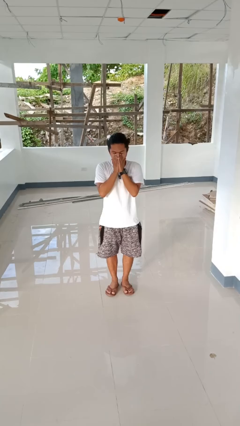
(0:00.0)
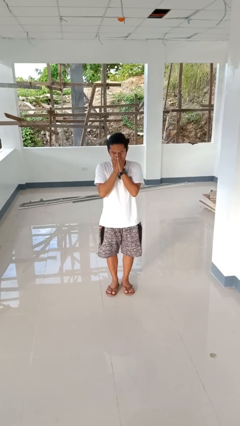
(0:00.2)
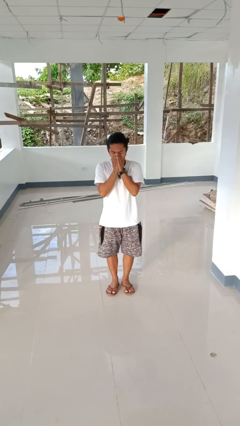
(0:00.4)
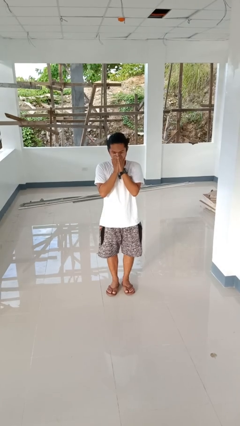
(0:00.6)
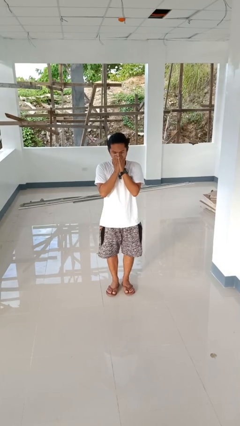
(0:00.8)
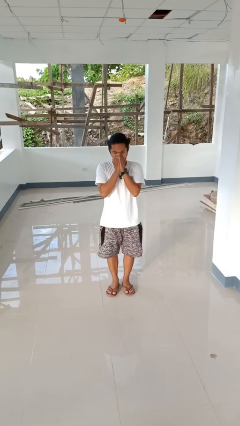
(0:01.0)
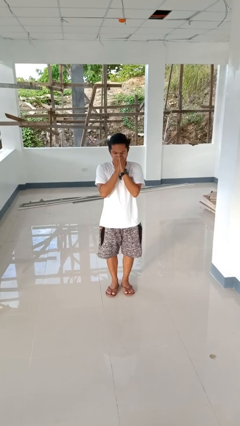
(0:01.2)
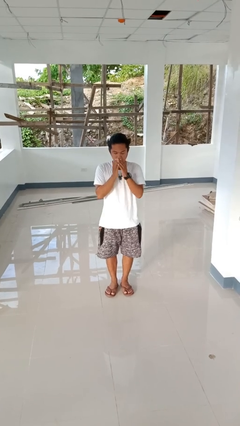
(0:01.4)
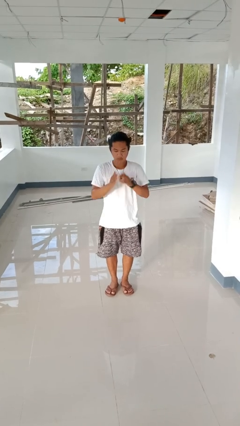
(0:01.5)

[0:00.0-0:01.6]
person sneezes into hand

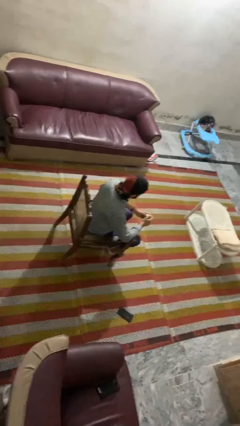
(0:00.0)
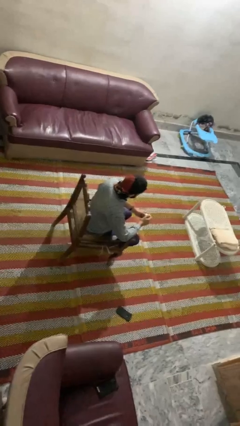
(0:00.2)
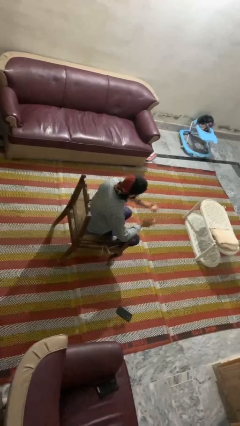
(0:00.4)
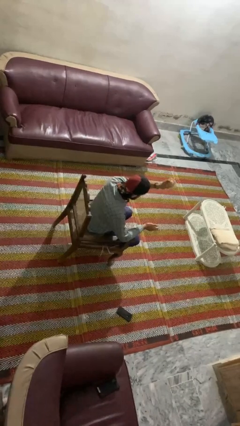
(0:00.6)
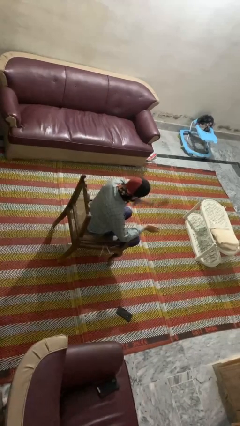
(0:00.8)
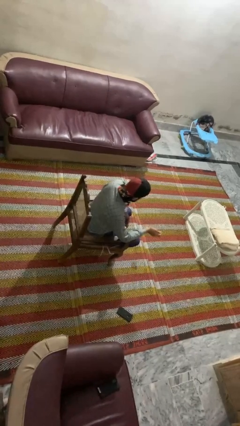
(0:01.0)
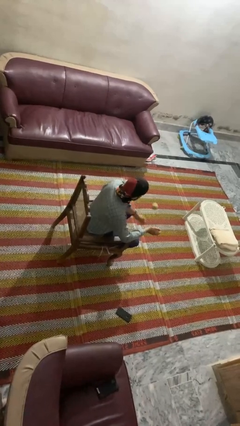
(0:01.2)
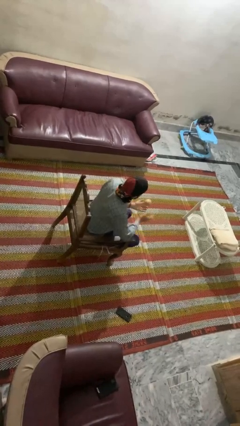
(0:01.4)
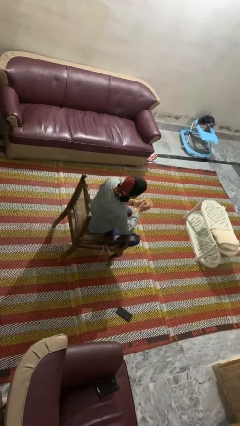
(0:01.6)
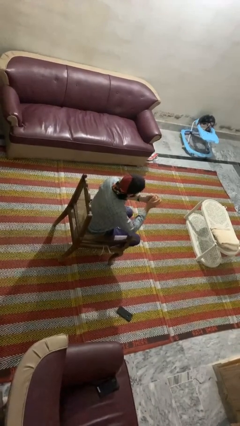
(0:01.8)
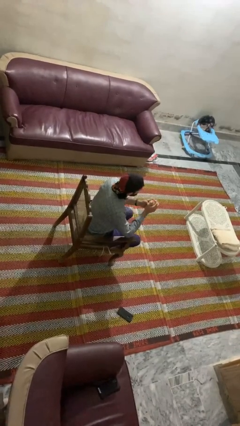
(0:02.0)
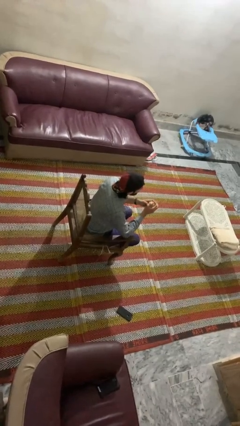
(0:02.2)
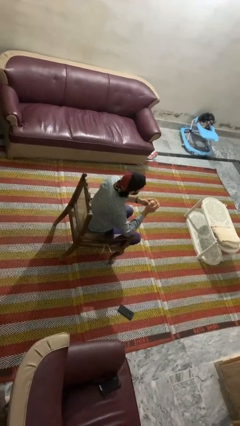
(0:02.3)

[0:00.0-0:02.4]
person bounces ball on floor

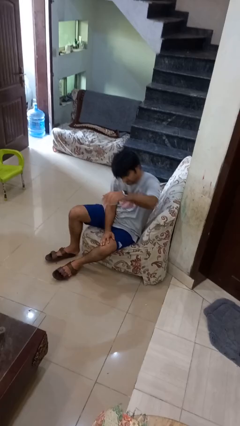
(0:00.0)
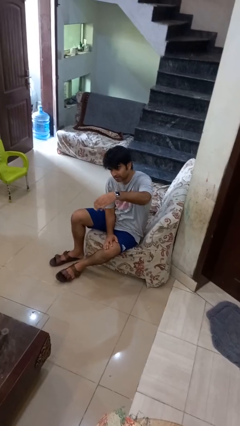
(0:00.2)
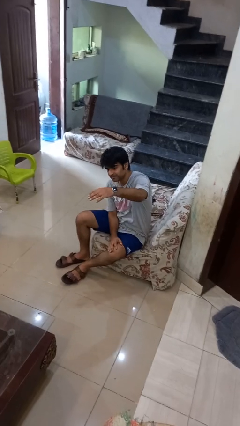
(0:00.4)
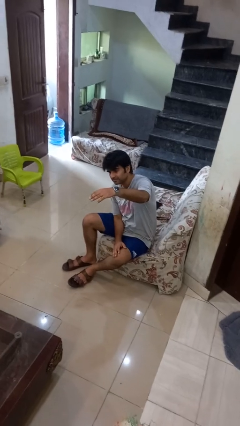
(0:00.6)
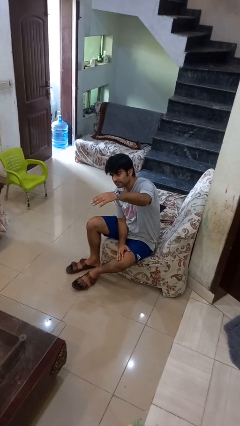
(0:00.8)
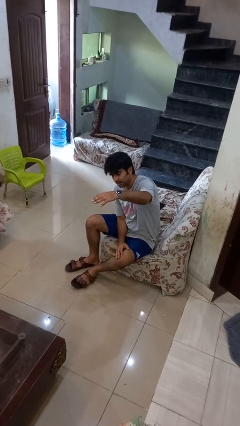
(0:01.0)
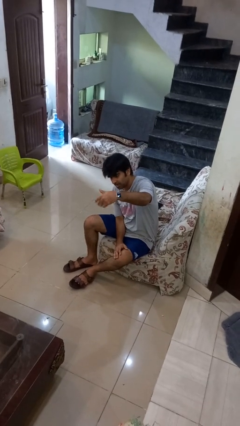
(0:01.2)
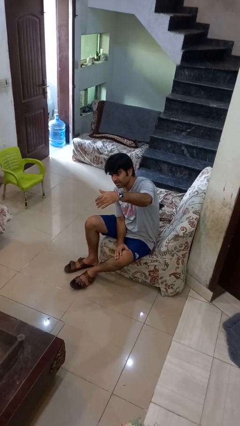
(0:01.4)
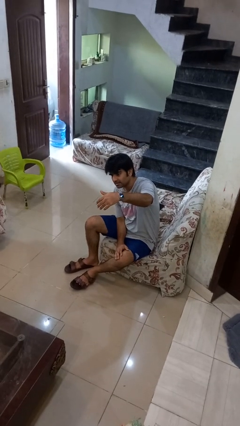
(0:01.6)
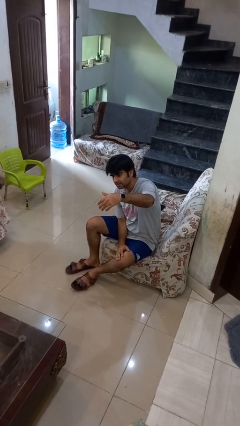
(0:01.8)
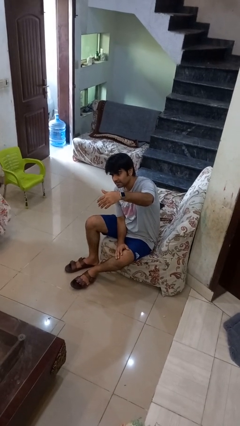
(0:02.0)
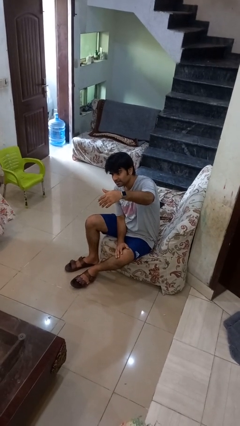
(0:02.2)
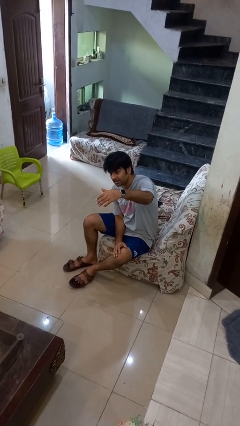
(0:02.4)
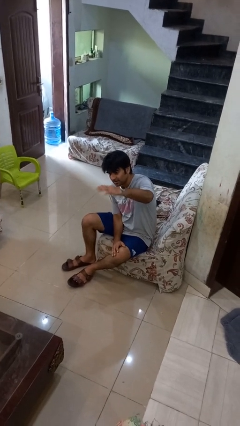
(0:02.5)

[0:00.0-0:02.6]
person gestures come here

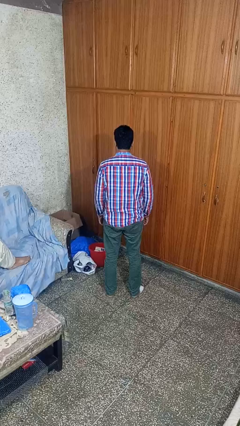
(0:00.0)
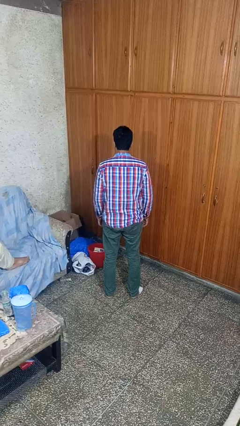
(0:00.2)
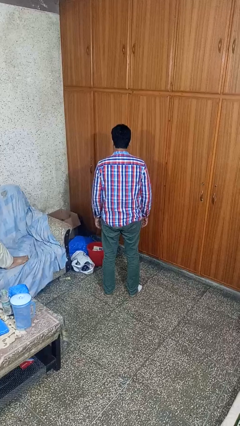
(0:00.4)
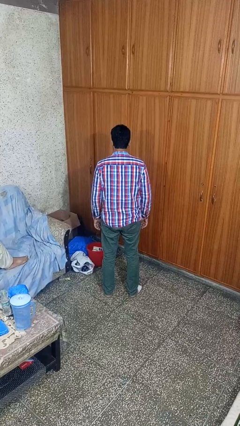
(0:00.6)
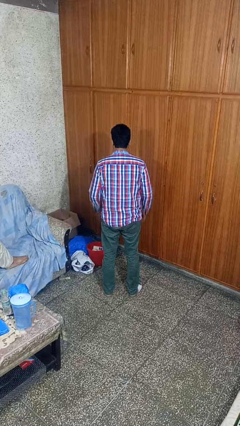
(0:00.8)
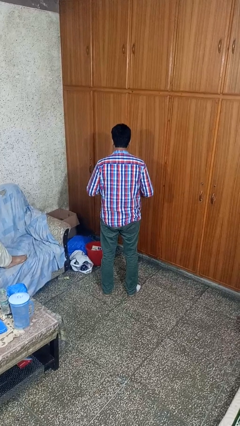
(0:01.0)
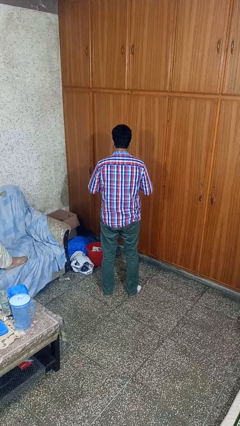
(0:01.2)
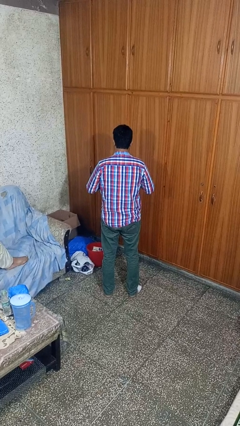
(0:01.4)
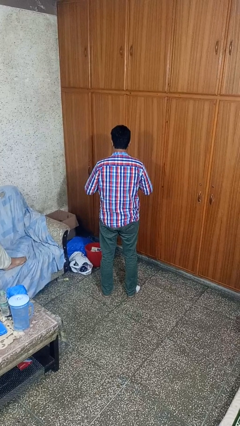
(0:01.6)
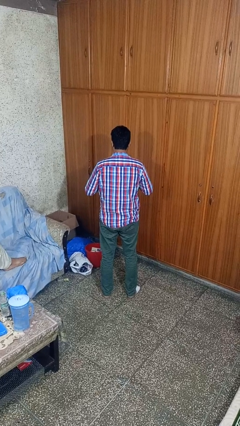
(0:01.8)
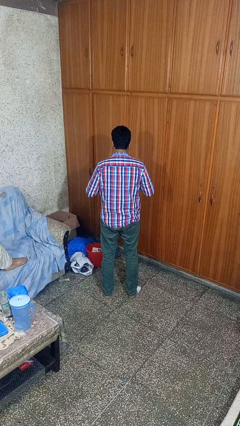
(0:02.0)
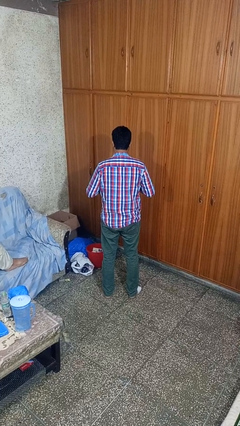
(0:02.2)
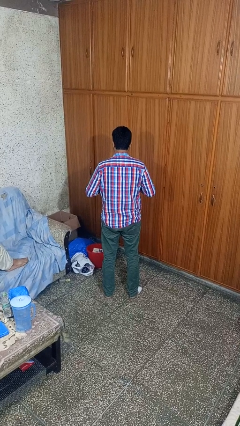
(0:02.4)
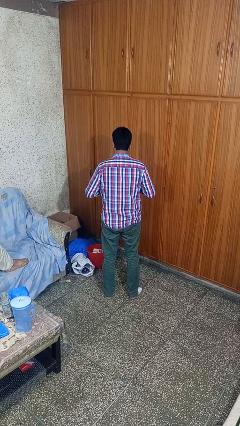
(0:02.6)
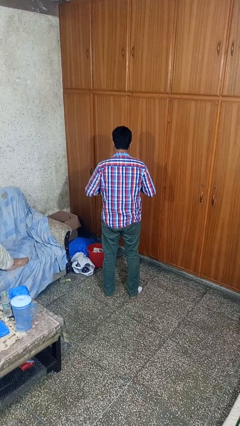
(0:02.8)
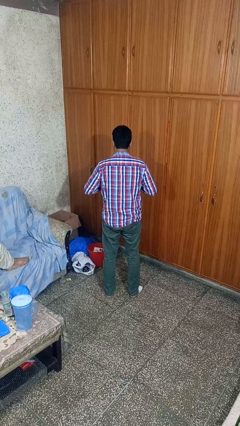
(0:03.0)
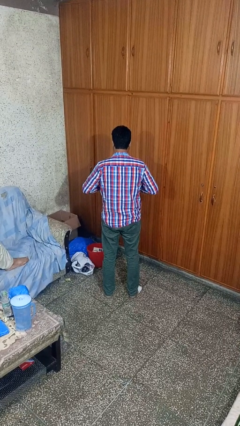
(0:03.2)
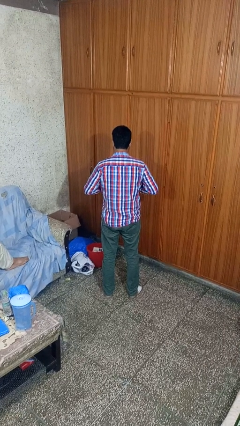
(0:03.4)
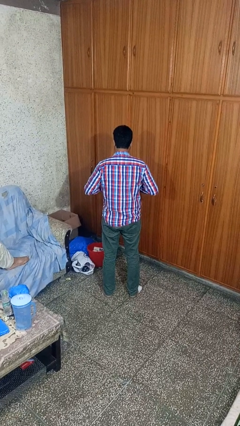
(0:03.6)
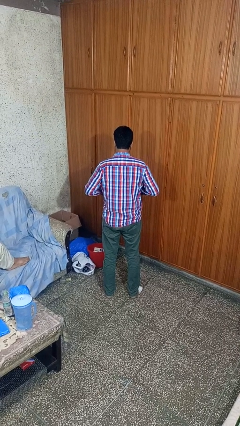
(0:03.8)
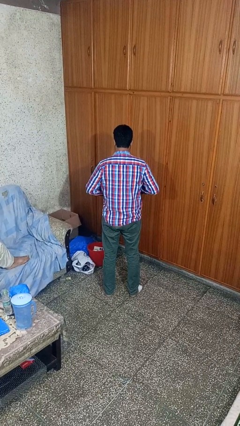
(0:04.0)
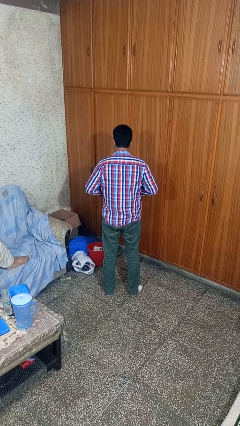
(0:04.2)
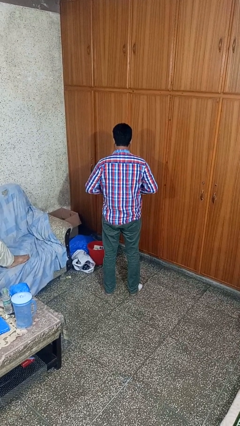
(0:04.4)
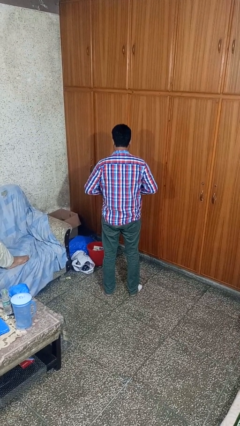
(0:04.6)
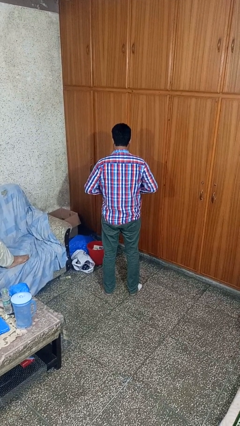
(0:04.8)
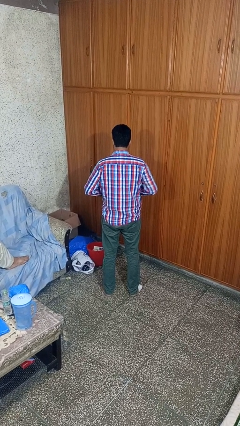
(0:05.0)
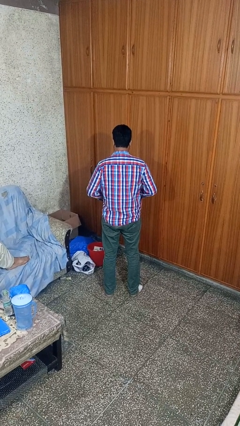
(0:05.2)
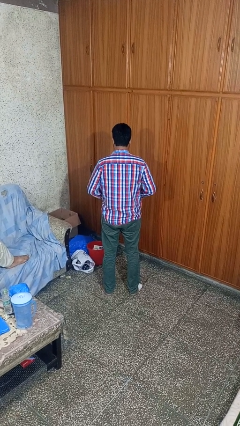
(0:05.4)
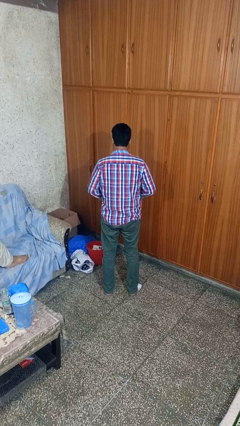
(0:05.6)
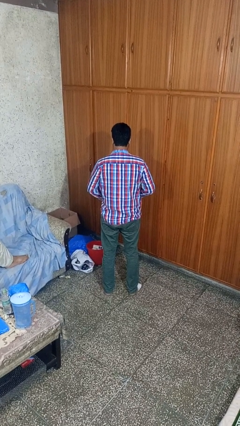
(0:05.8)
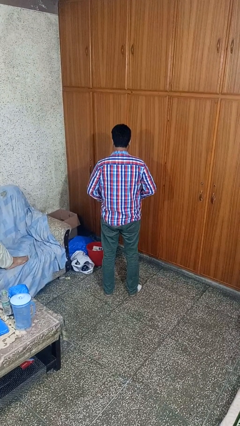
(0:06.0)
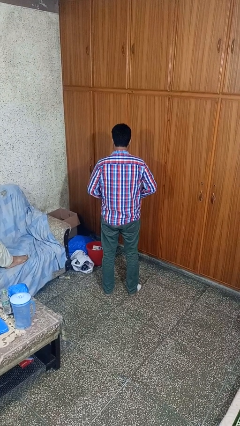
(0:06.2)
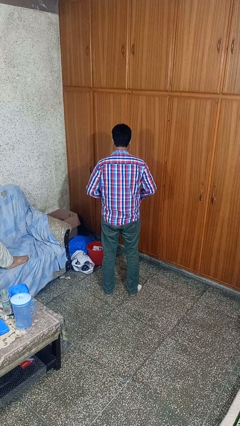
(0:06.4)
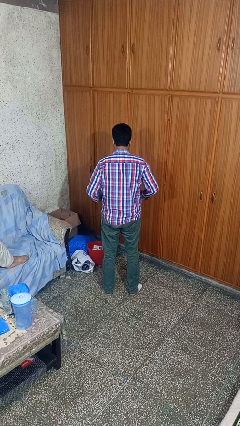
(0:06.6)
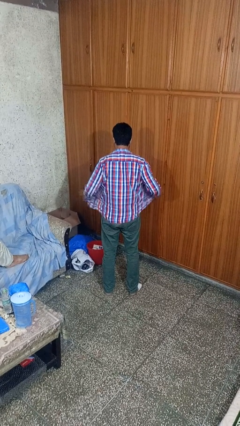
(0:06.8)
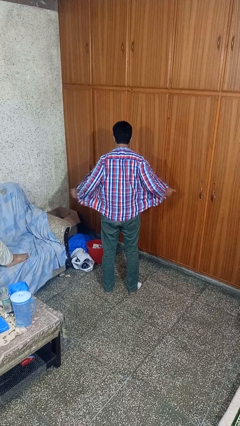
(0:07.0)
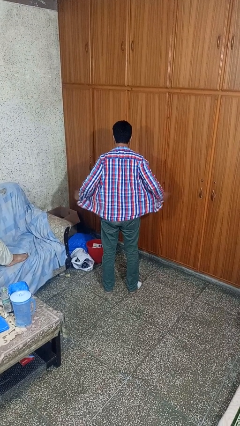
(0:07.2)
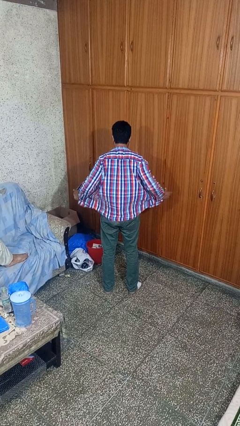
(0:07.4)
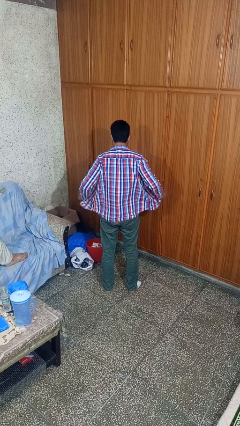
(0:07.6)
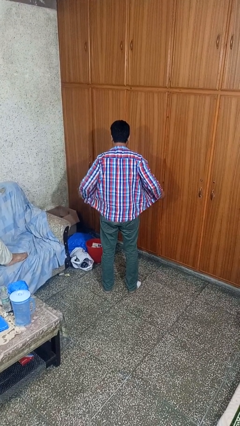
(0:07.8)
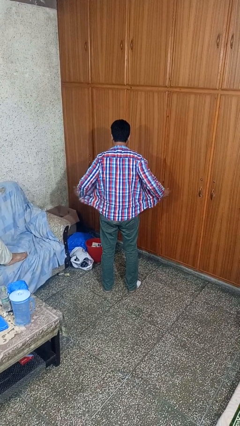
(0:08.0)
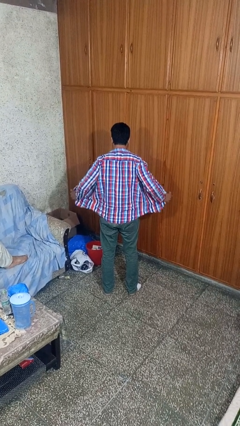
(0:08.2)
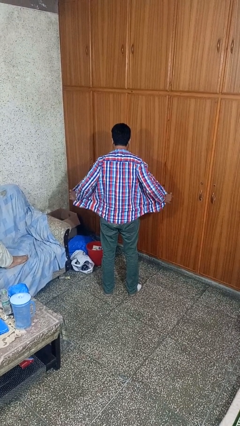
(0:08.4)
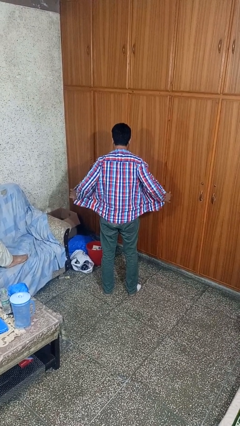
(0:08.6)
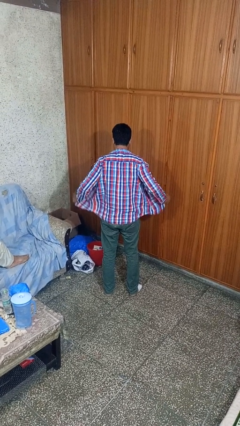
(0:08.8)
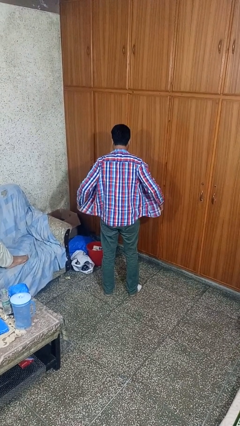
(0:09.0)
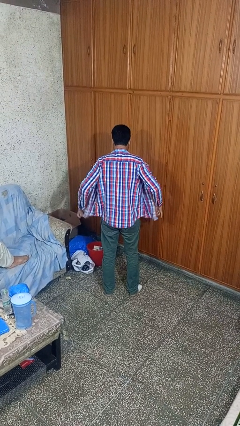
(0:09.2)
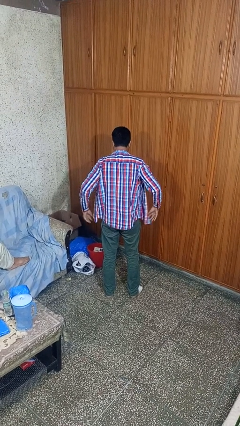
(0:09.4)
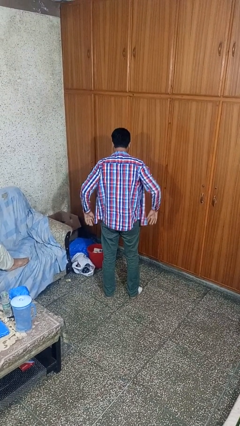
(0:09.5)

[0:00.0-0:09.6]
person unbuttons shirt

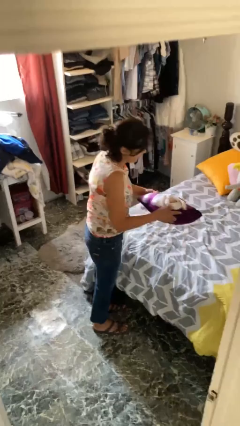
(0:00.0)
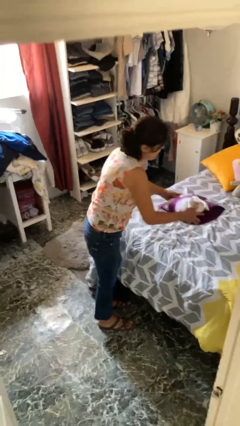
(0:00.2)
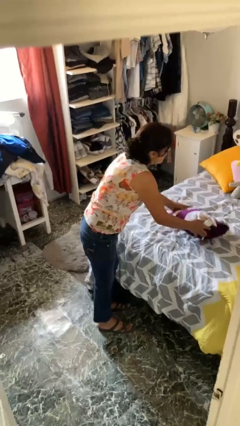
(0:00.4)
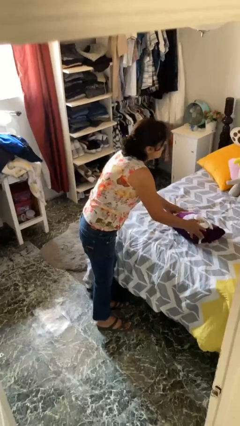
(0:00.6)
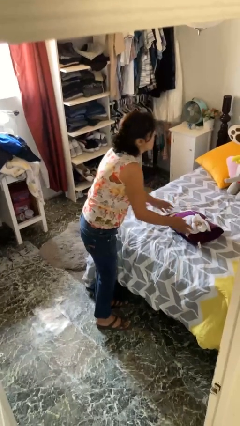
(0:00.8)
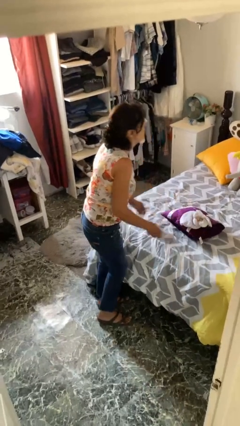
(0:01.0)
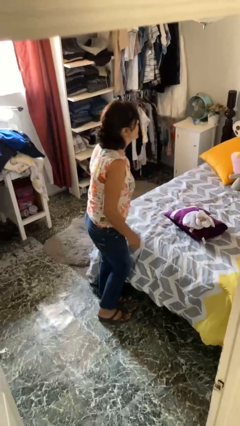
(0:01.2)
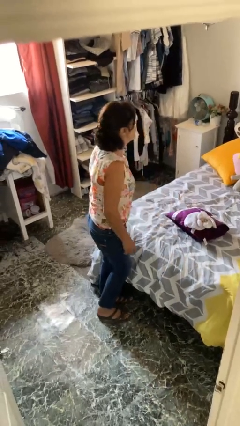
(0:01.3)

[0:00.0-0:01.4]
person puts down object on bed
